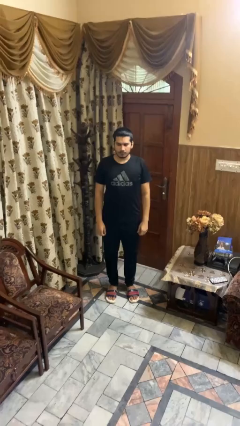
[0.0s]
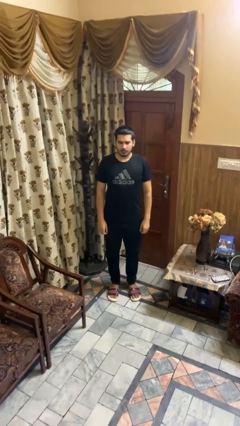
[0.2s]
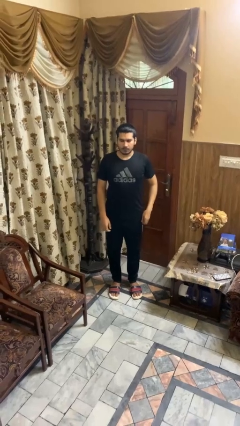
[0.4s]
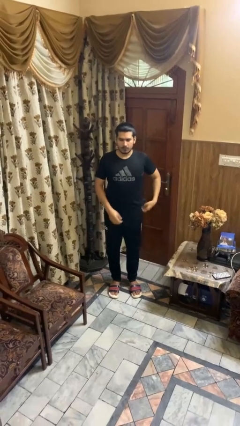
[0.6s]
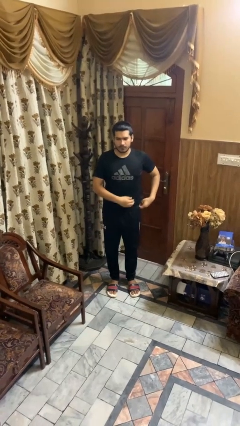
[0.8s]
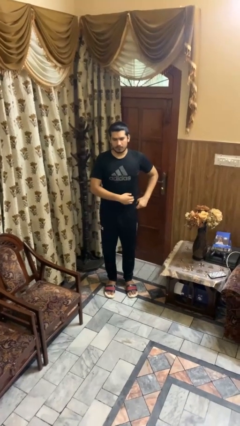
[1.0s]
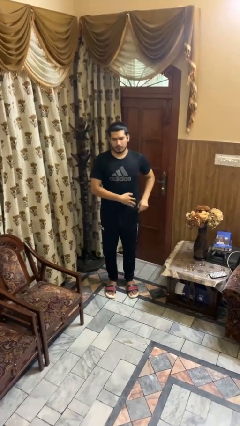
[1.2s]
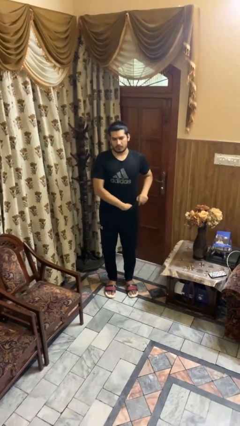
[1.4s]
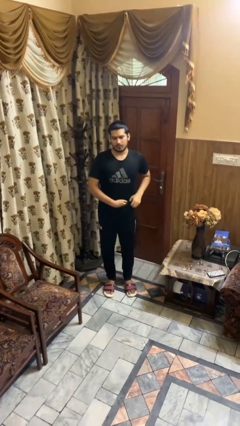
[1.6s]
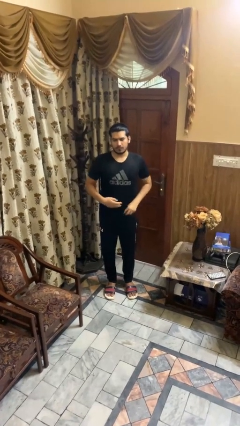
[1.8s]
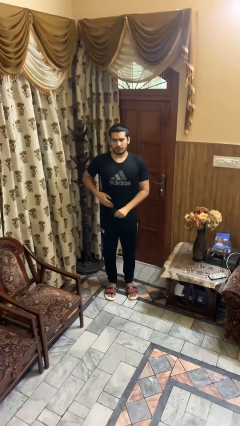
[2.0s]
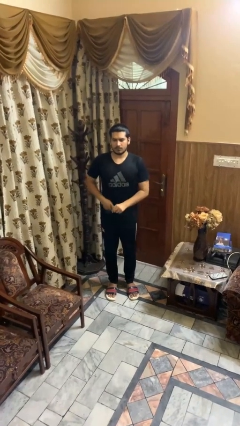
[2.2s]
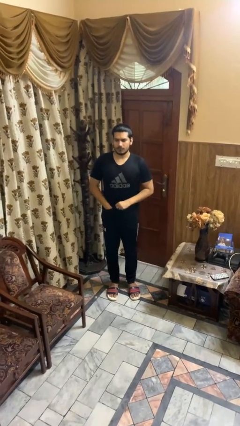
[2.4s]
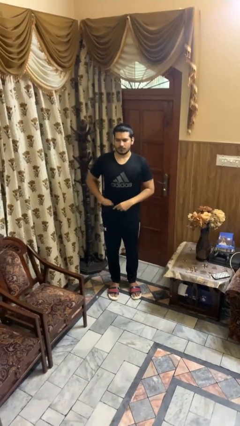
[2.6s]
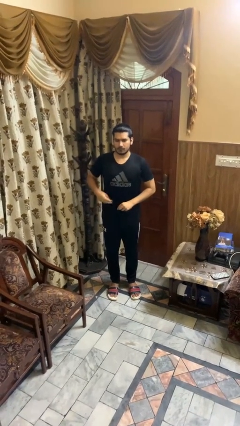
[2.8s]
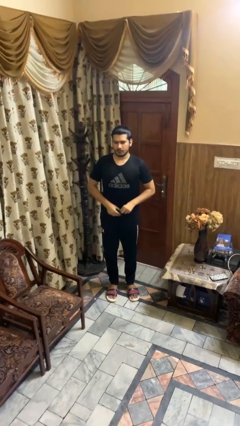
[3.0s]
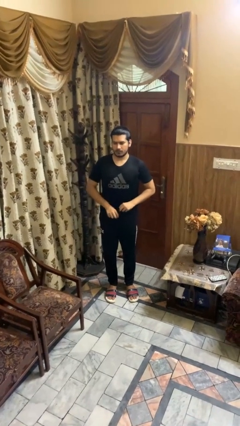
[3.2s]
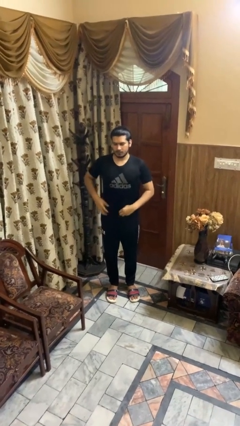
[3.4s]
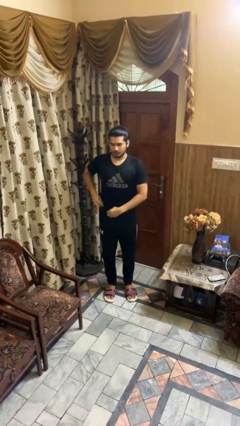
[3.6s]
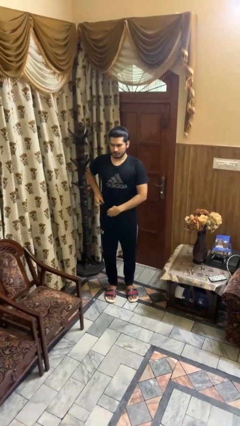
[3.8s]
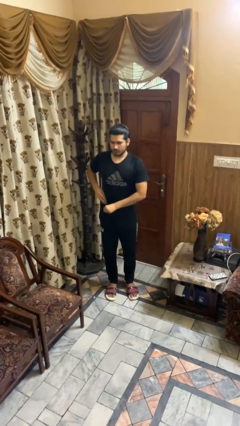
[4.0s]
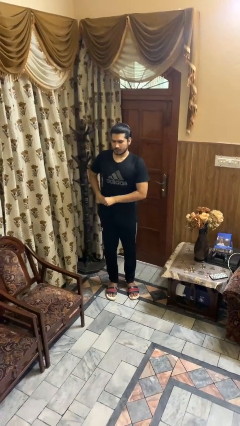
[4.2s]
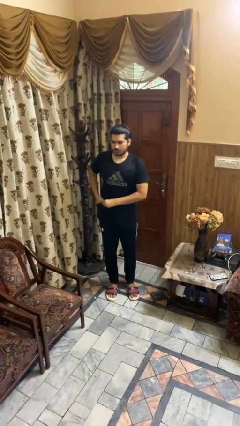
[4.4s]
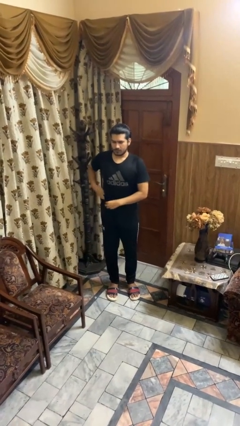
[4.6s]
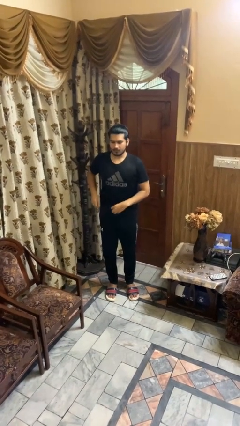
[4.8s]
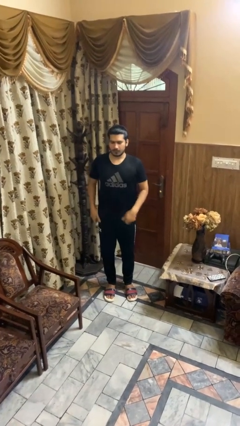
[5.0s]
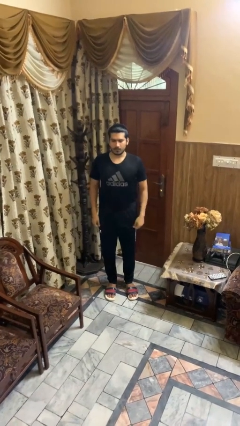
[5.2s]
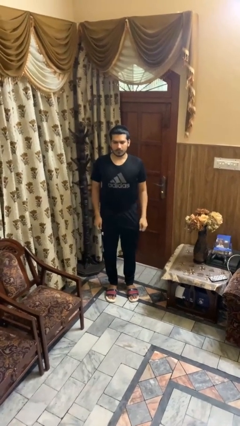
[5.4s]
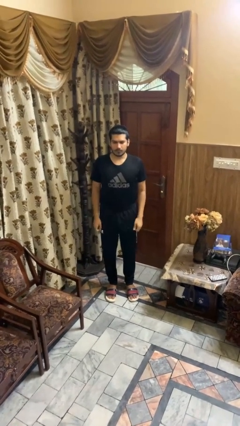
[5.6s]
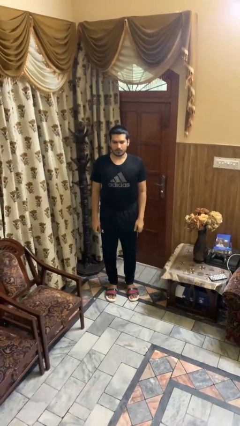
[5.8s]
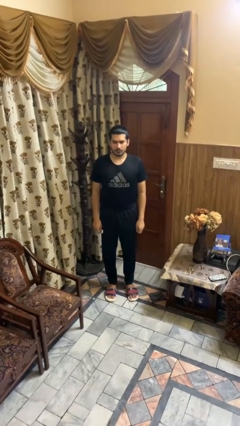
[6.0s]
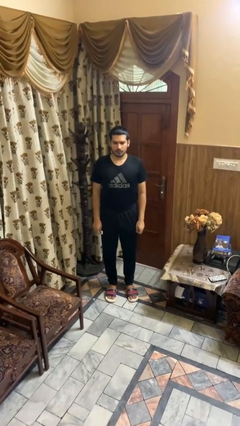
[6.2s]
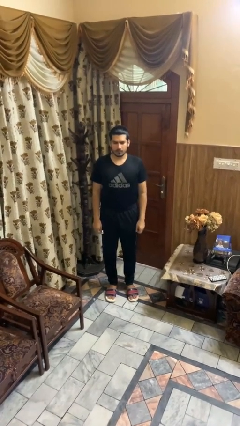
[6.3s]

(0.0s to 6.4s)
person tucks in shirt

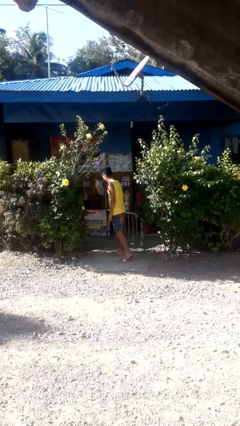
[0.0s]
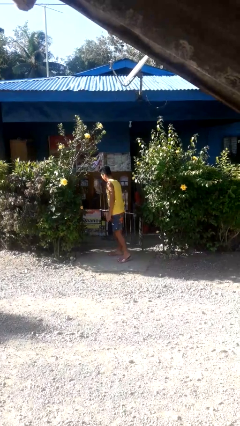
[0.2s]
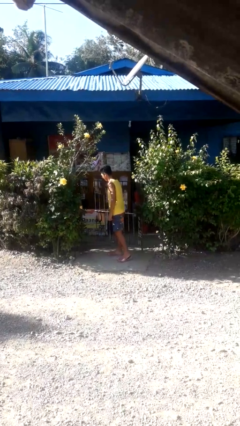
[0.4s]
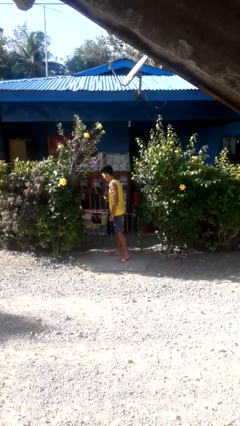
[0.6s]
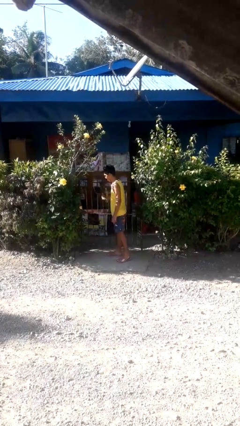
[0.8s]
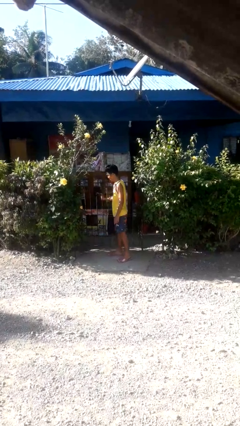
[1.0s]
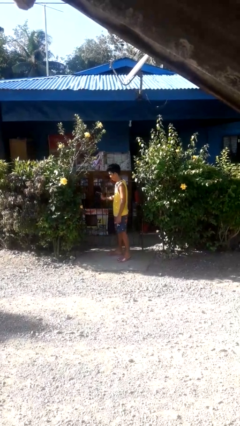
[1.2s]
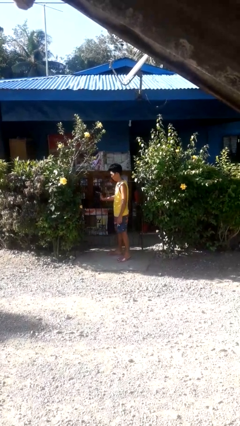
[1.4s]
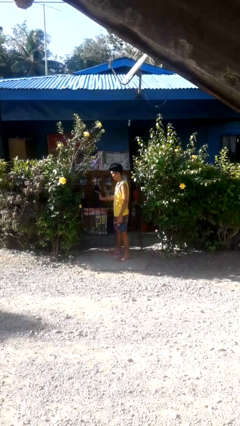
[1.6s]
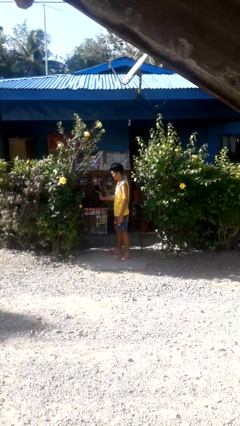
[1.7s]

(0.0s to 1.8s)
person closes gate

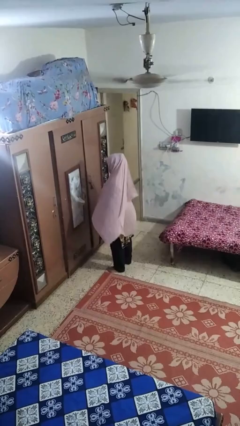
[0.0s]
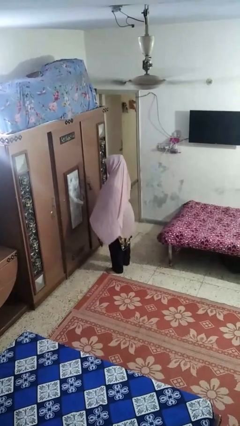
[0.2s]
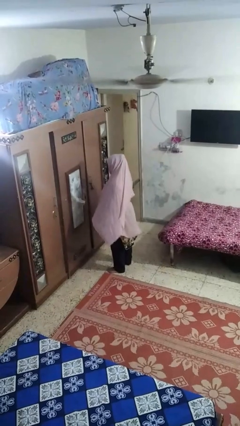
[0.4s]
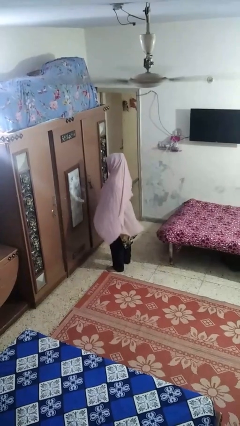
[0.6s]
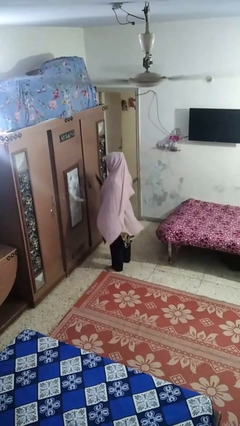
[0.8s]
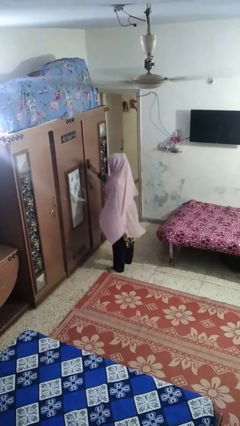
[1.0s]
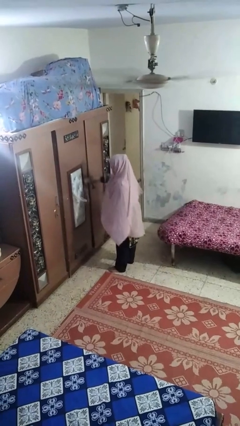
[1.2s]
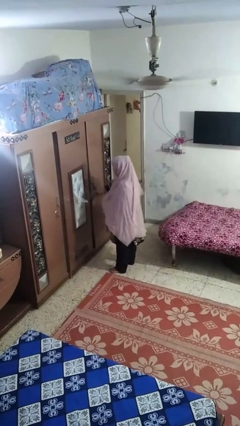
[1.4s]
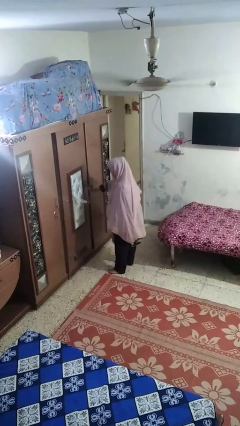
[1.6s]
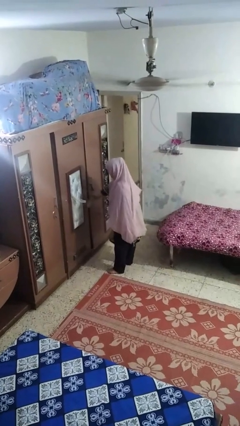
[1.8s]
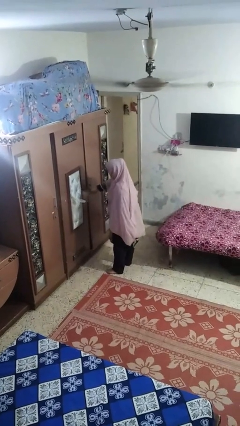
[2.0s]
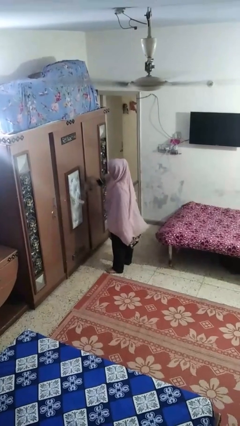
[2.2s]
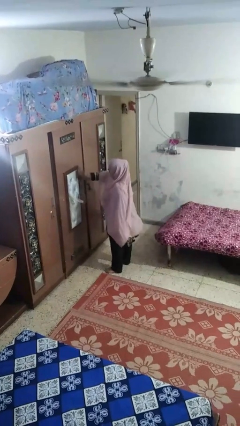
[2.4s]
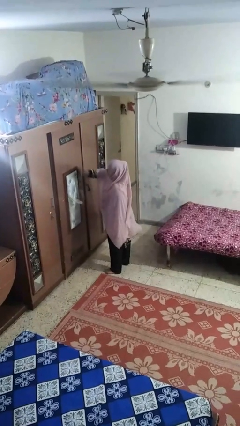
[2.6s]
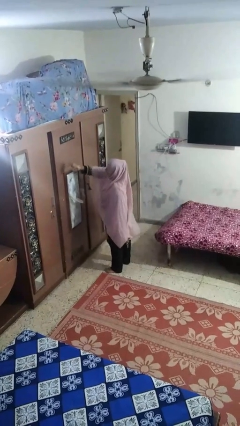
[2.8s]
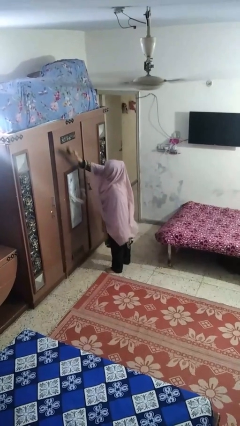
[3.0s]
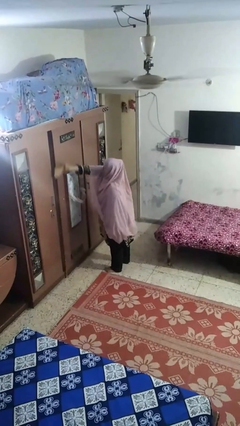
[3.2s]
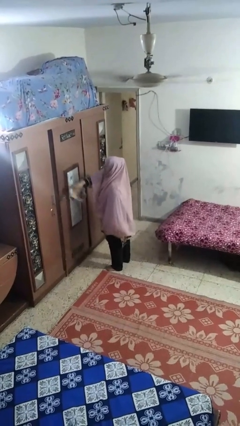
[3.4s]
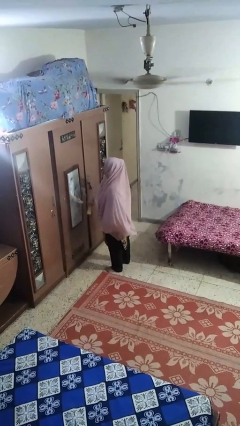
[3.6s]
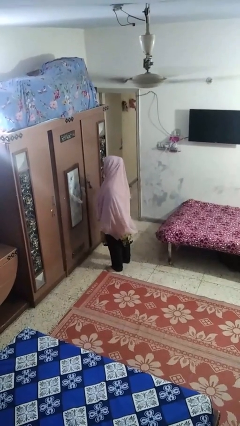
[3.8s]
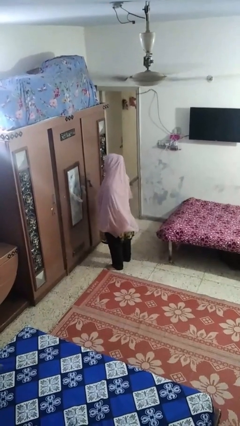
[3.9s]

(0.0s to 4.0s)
person dusts furniture

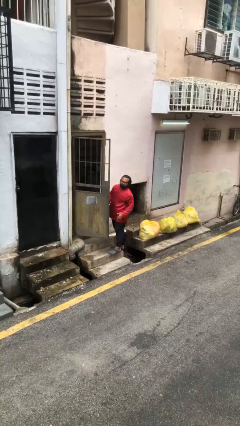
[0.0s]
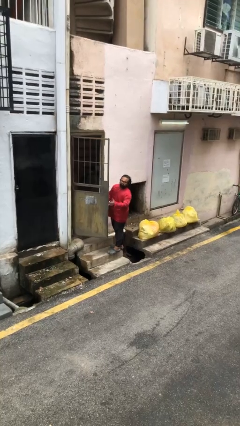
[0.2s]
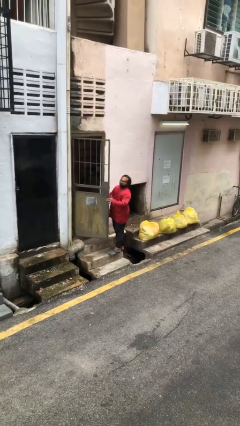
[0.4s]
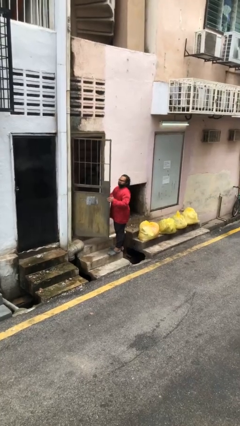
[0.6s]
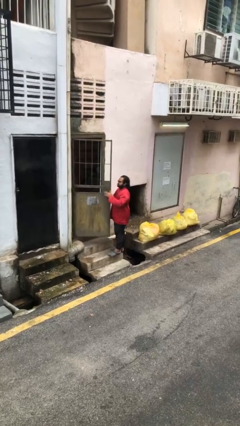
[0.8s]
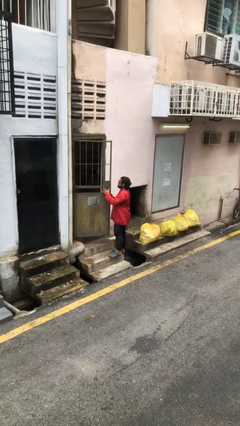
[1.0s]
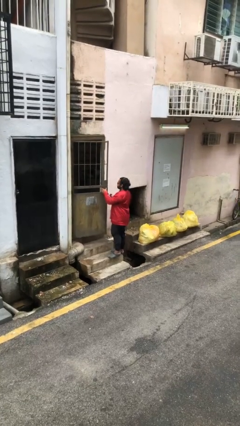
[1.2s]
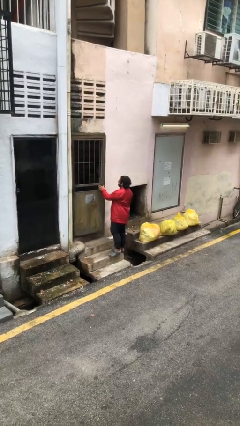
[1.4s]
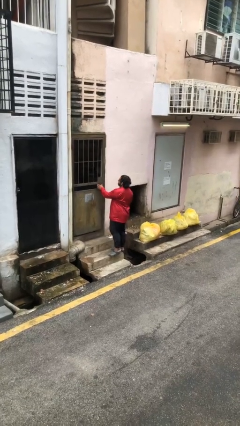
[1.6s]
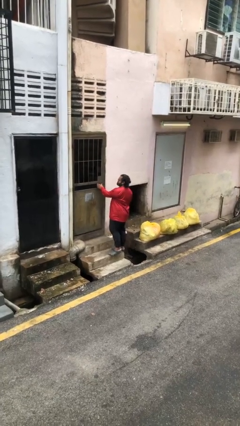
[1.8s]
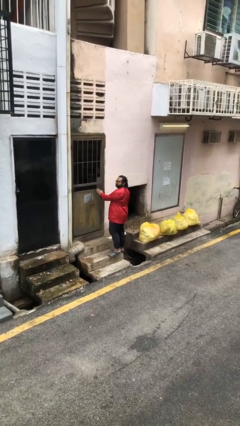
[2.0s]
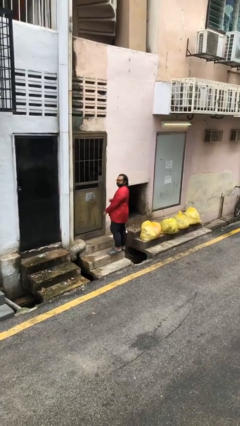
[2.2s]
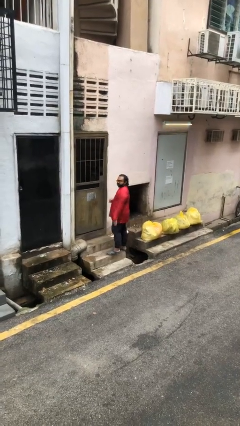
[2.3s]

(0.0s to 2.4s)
person closes facility door

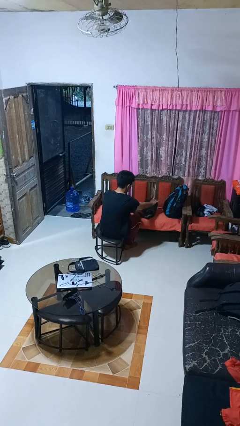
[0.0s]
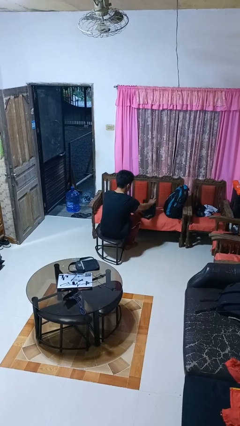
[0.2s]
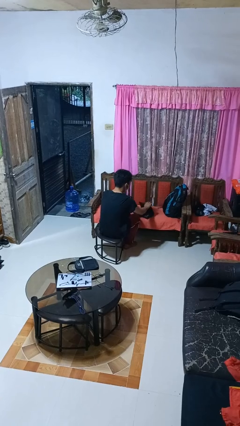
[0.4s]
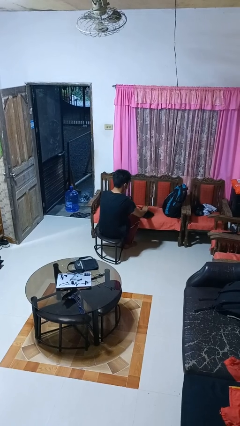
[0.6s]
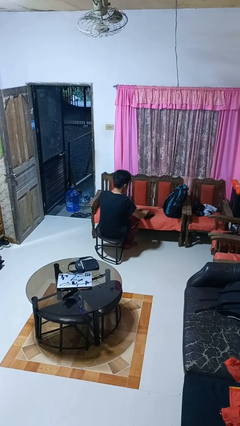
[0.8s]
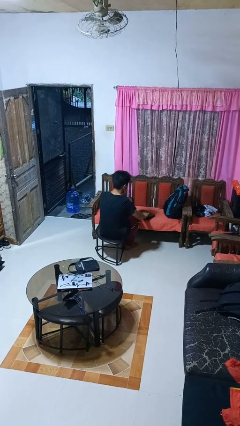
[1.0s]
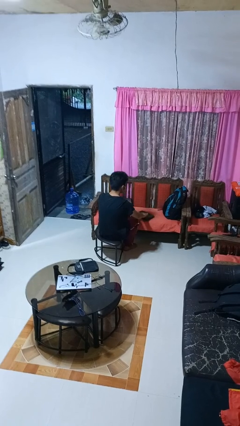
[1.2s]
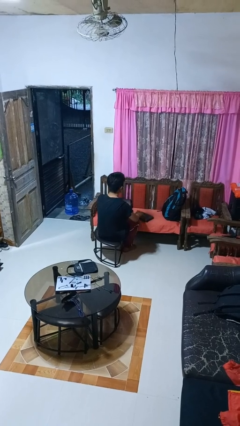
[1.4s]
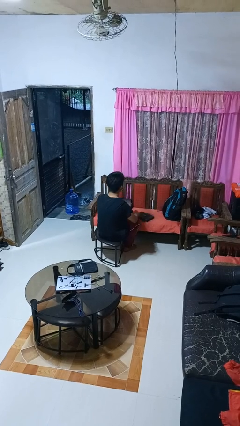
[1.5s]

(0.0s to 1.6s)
person closes laptop

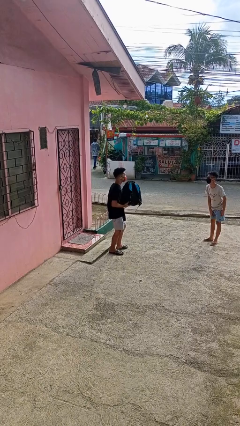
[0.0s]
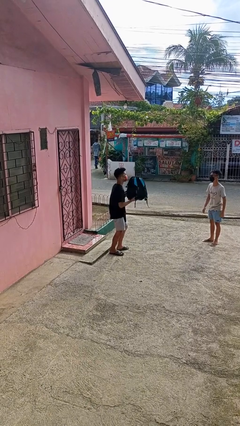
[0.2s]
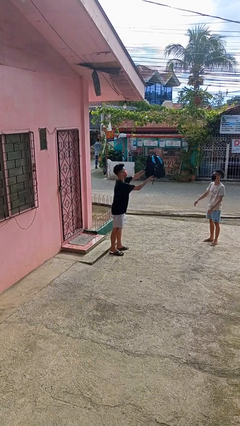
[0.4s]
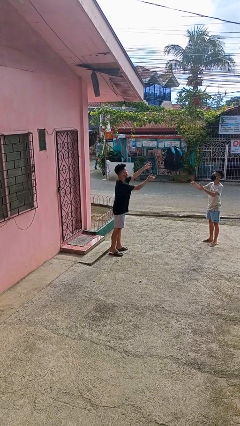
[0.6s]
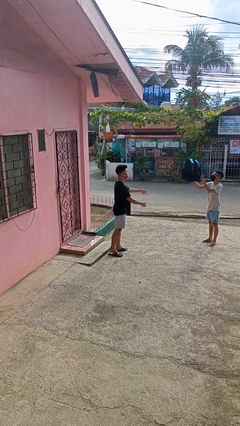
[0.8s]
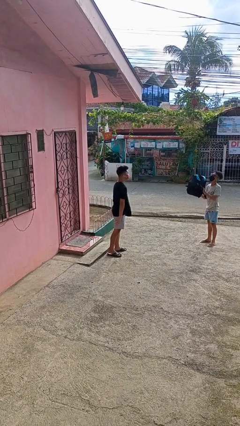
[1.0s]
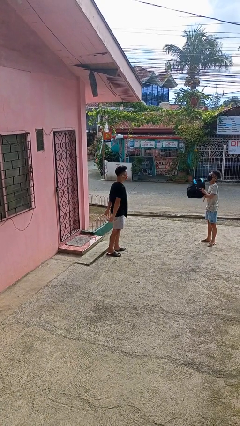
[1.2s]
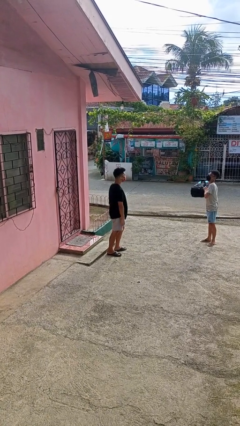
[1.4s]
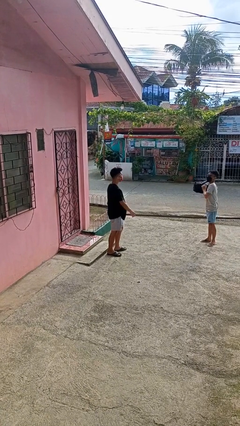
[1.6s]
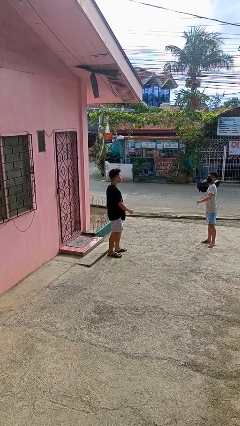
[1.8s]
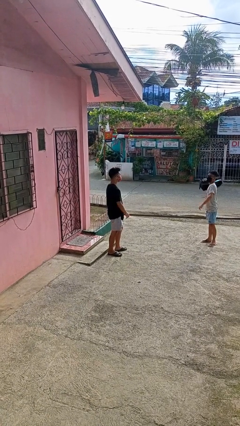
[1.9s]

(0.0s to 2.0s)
person throws object to person
